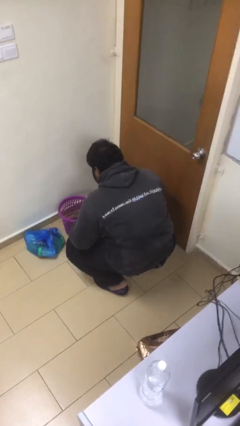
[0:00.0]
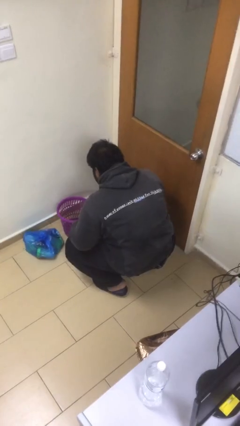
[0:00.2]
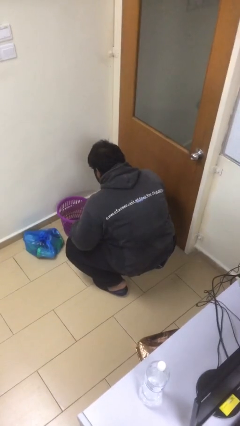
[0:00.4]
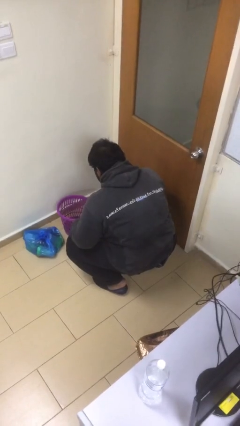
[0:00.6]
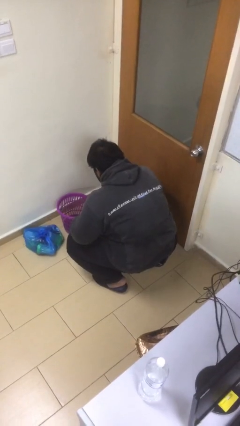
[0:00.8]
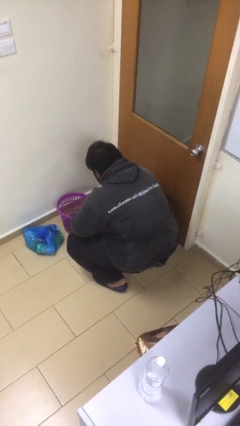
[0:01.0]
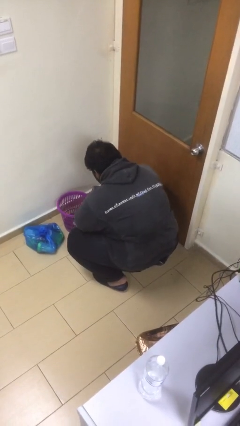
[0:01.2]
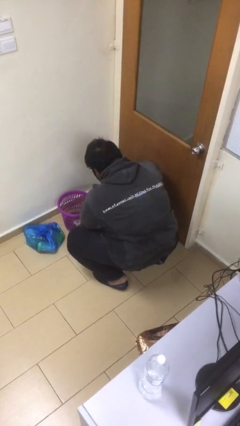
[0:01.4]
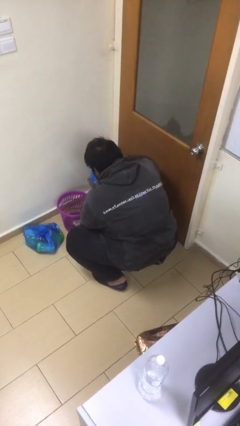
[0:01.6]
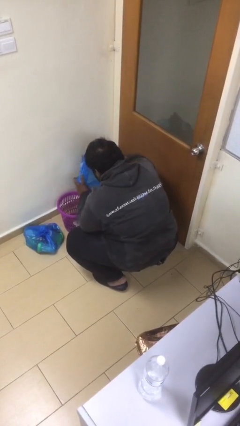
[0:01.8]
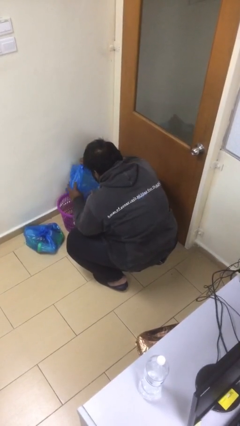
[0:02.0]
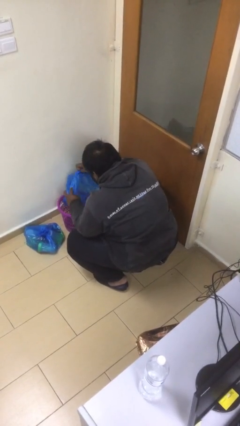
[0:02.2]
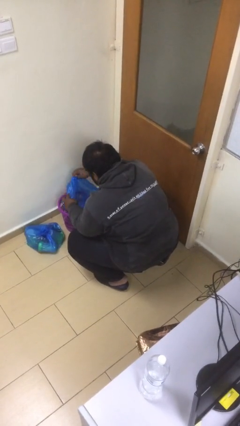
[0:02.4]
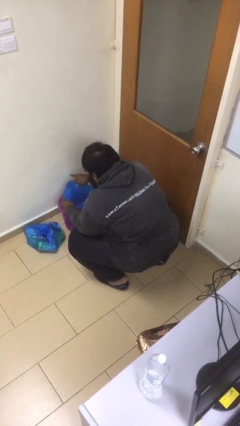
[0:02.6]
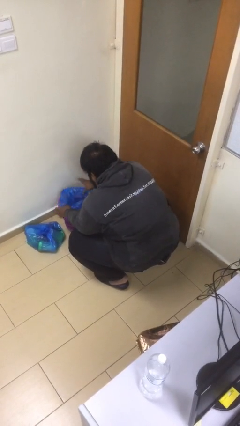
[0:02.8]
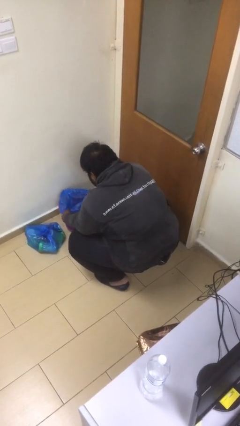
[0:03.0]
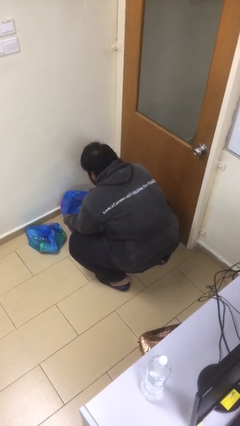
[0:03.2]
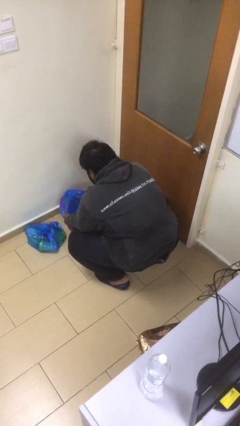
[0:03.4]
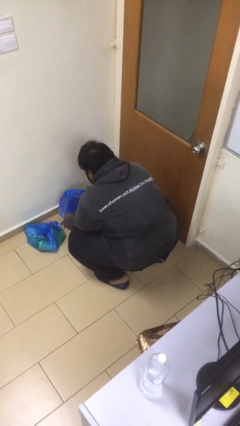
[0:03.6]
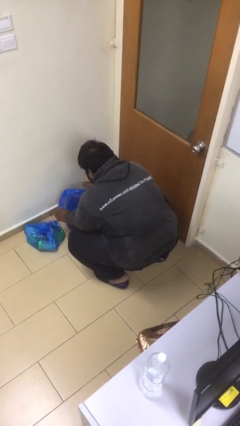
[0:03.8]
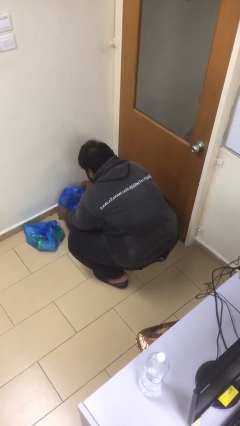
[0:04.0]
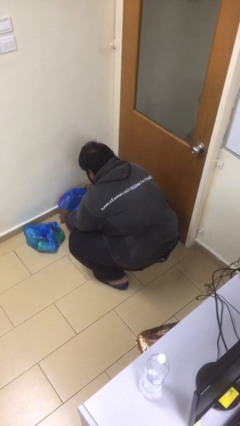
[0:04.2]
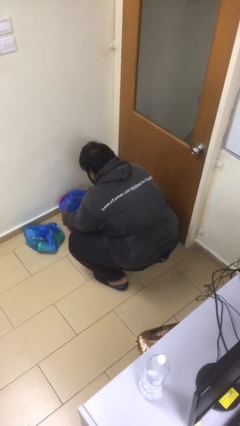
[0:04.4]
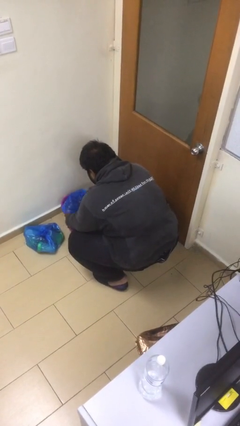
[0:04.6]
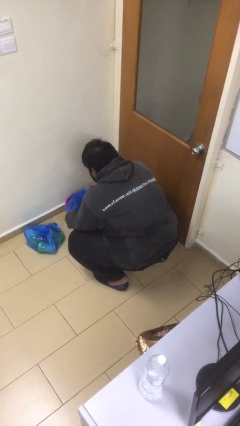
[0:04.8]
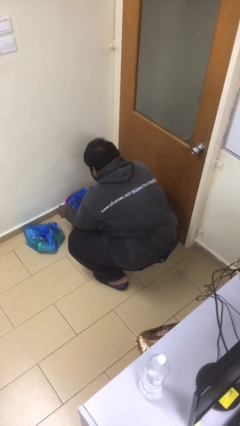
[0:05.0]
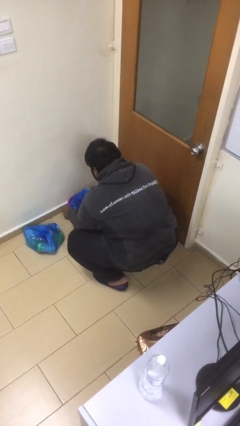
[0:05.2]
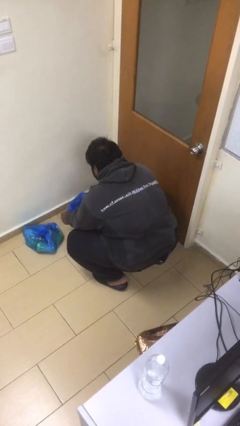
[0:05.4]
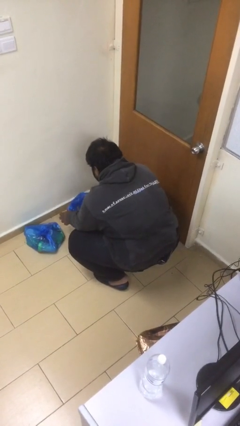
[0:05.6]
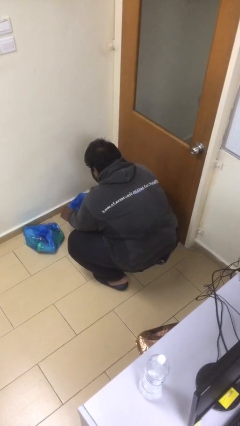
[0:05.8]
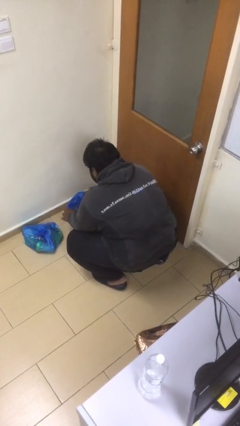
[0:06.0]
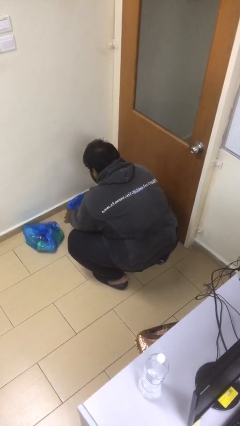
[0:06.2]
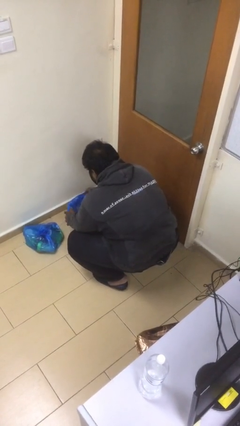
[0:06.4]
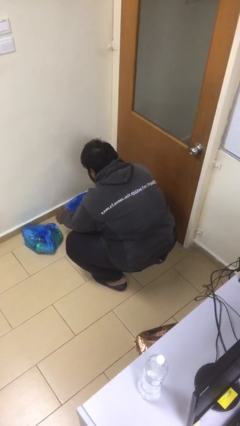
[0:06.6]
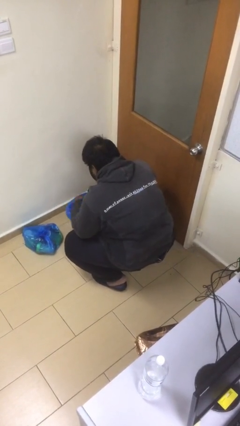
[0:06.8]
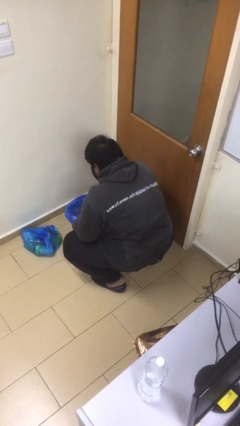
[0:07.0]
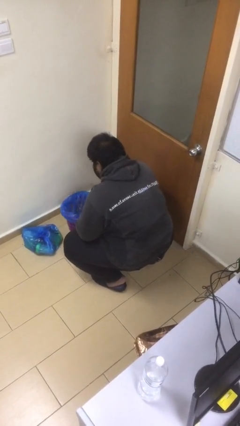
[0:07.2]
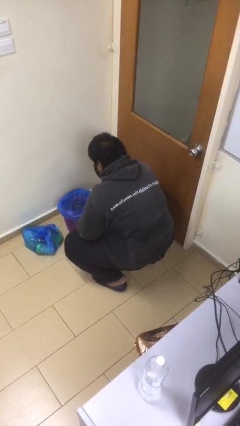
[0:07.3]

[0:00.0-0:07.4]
person inserts trashbag into trashcan

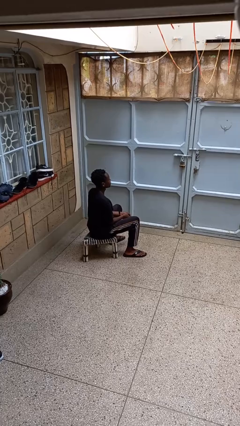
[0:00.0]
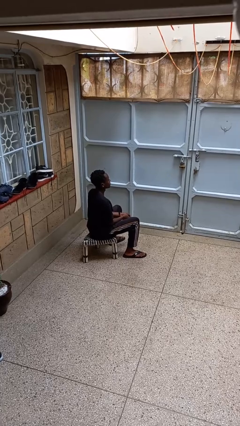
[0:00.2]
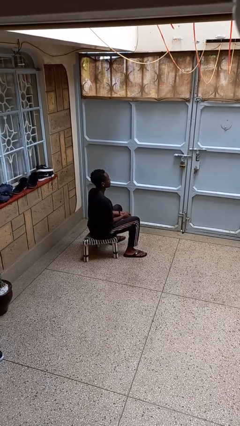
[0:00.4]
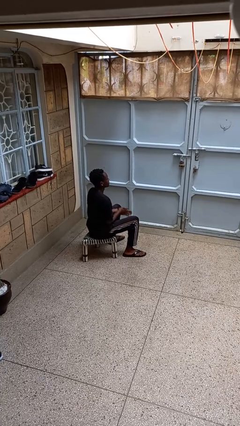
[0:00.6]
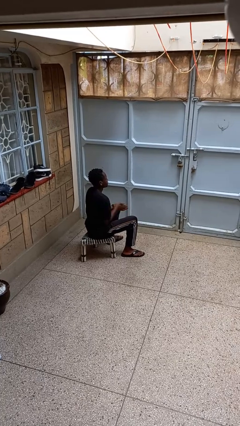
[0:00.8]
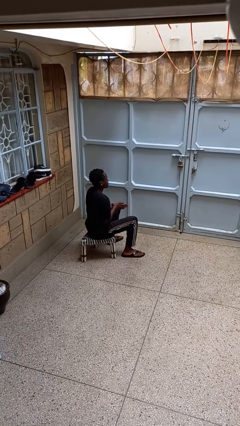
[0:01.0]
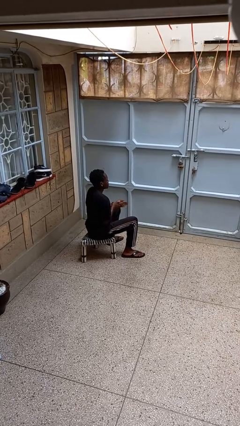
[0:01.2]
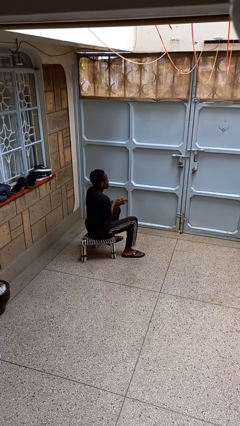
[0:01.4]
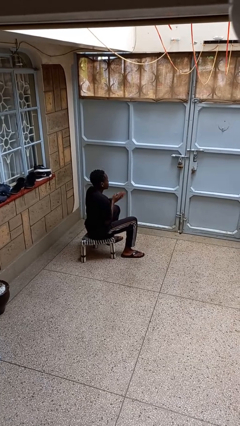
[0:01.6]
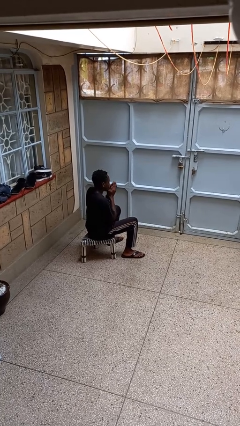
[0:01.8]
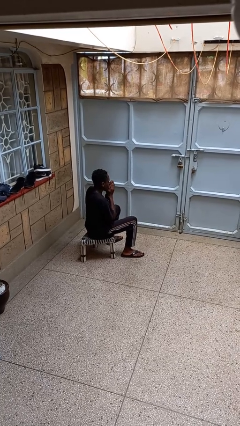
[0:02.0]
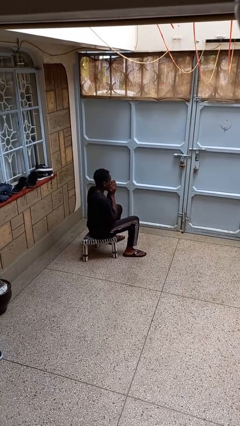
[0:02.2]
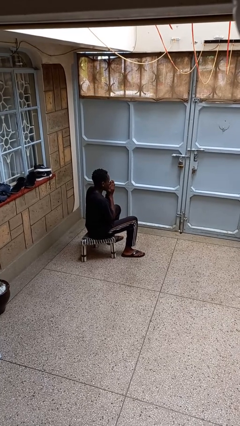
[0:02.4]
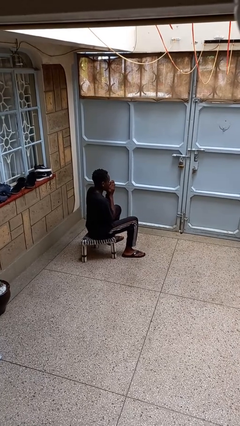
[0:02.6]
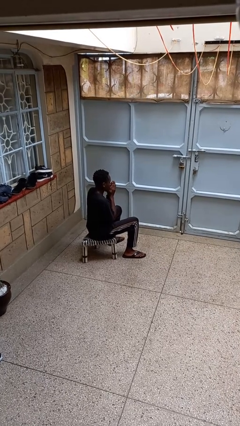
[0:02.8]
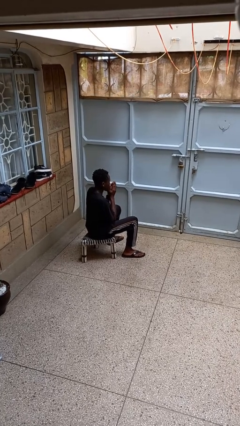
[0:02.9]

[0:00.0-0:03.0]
person blows into hands

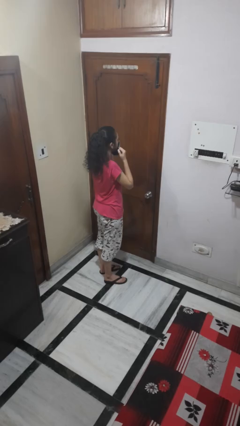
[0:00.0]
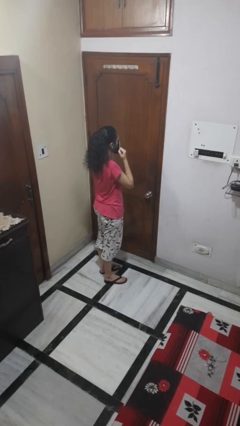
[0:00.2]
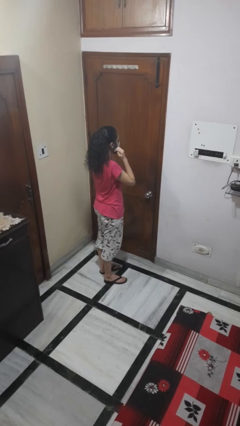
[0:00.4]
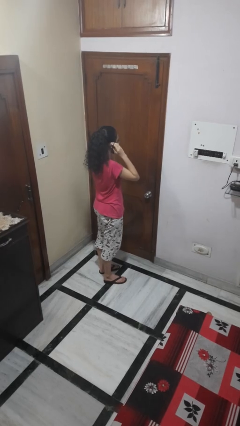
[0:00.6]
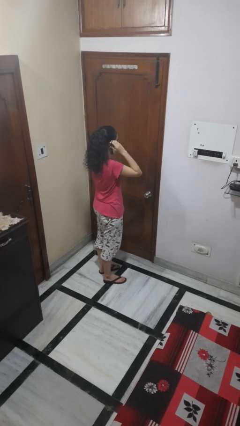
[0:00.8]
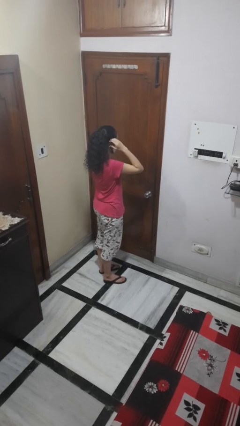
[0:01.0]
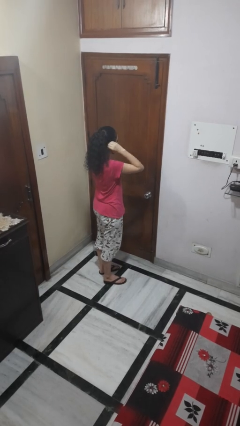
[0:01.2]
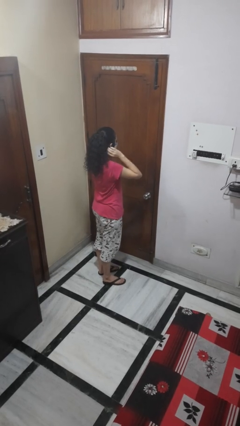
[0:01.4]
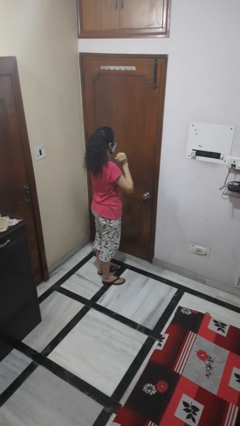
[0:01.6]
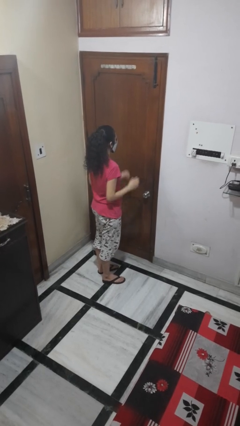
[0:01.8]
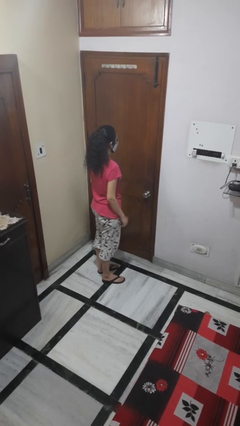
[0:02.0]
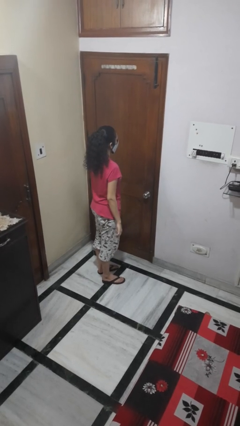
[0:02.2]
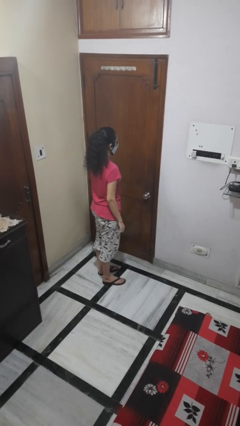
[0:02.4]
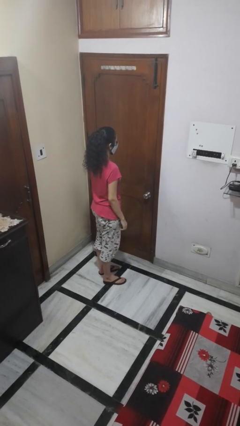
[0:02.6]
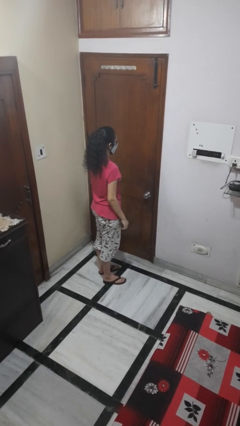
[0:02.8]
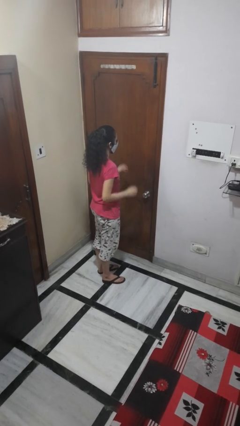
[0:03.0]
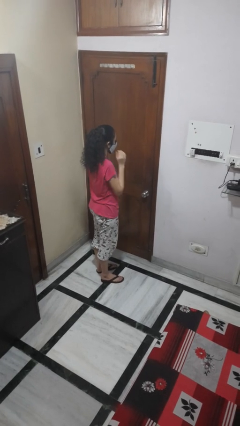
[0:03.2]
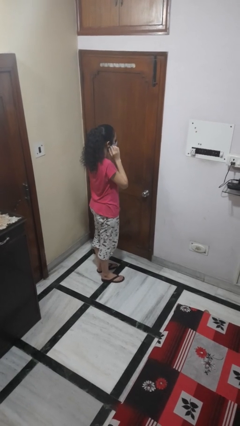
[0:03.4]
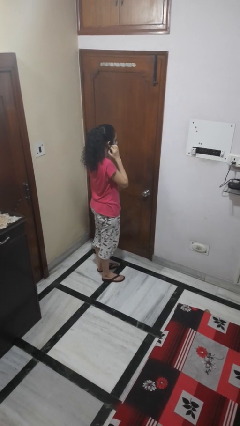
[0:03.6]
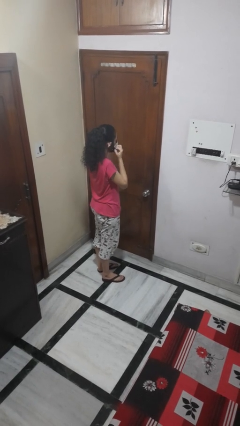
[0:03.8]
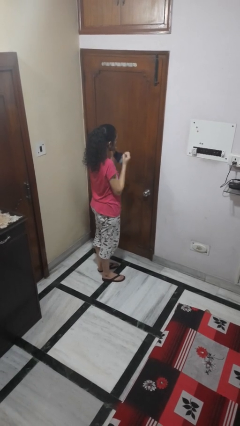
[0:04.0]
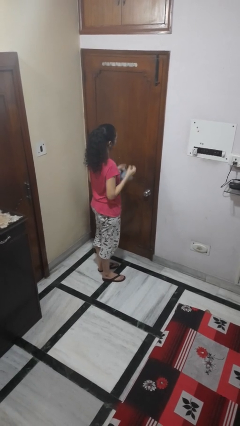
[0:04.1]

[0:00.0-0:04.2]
person puts on facemask

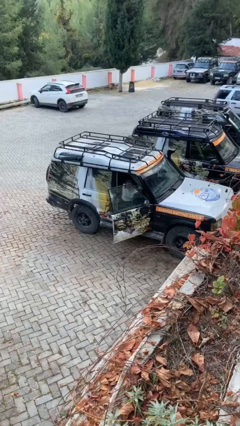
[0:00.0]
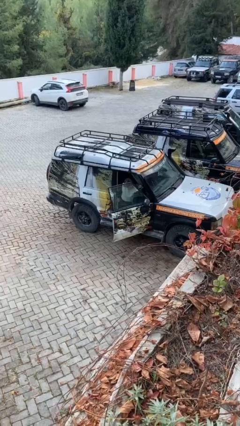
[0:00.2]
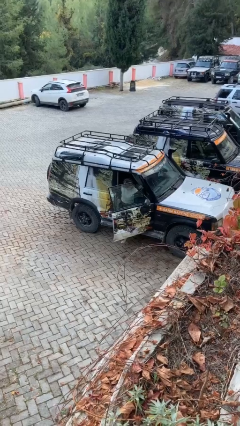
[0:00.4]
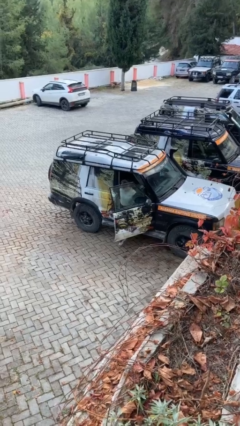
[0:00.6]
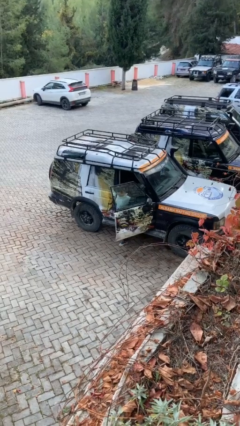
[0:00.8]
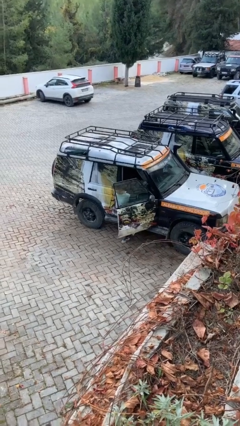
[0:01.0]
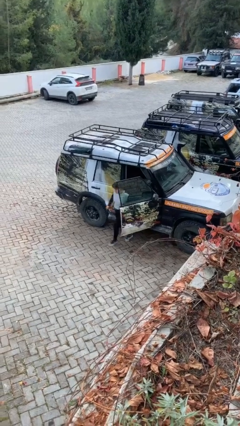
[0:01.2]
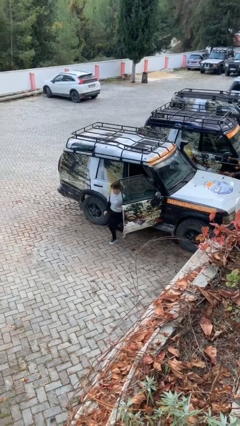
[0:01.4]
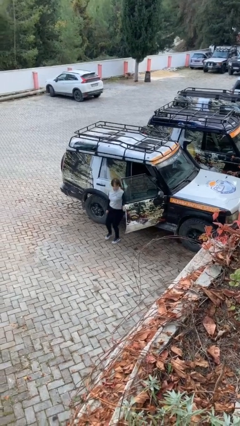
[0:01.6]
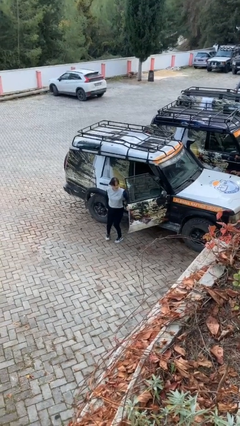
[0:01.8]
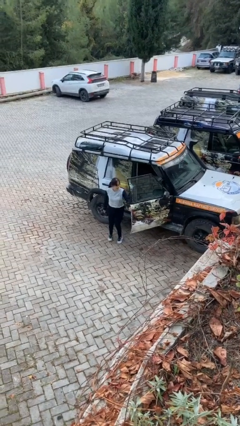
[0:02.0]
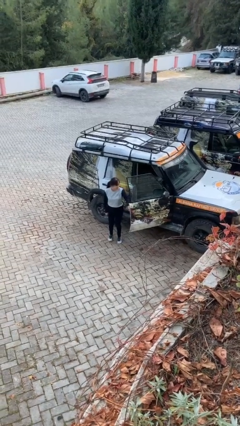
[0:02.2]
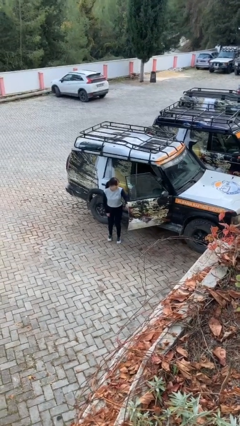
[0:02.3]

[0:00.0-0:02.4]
person exits car

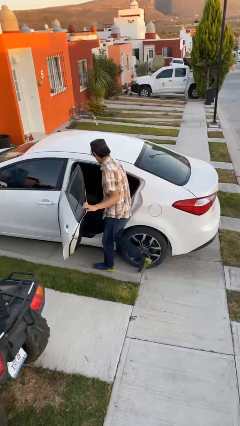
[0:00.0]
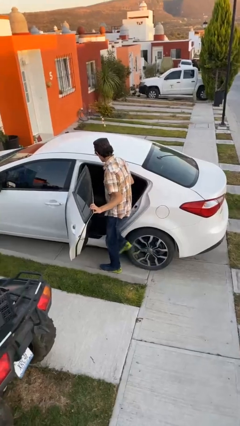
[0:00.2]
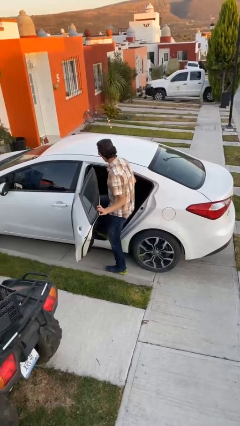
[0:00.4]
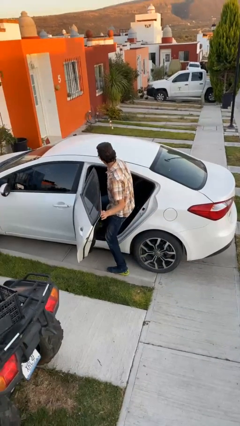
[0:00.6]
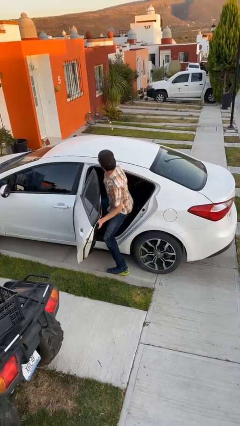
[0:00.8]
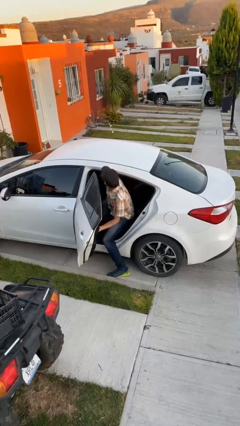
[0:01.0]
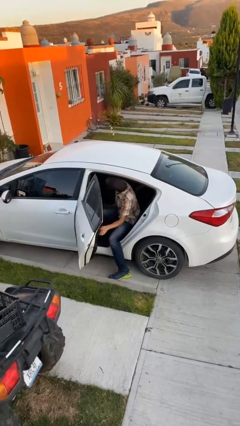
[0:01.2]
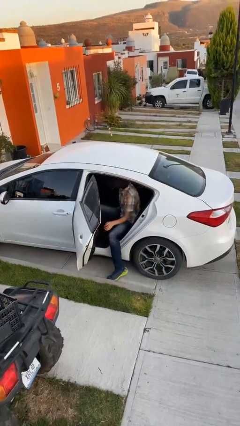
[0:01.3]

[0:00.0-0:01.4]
person enters car
